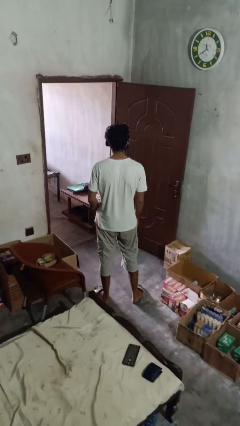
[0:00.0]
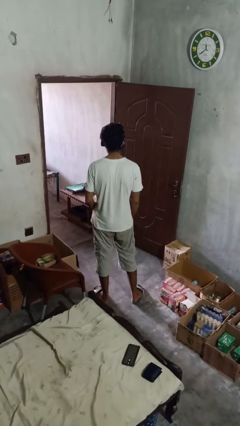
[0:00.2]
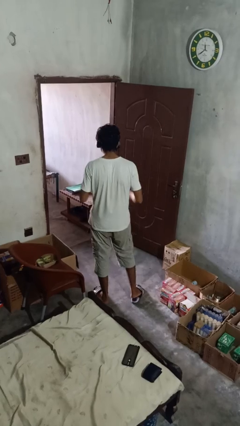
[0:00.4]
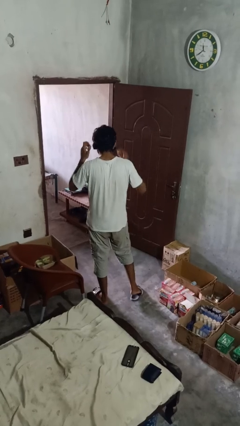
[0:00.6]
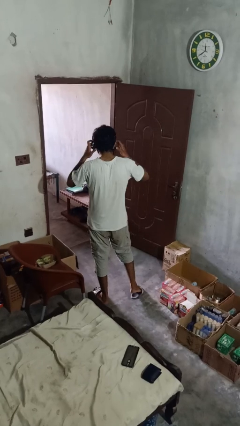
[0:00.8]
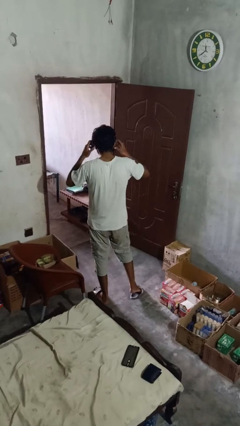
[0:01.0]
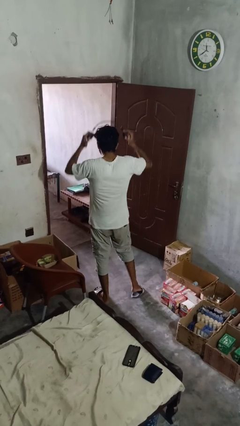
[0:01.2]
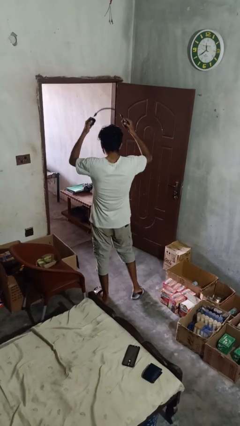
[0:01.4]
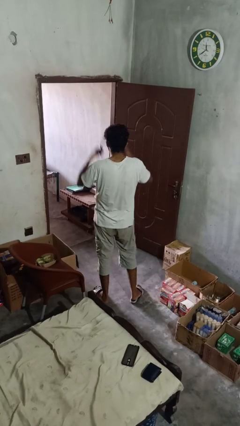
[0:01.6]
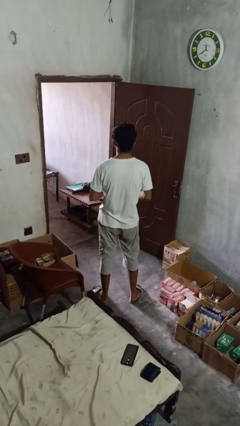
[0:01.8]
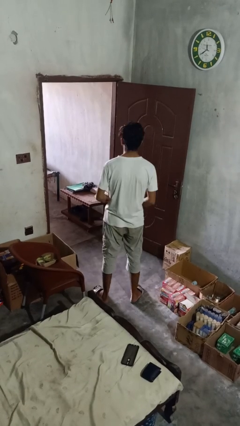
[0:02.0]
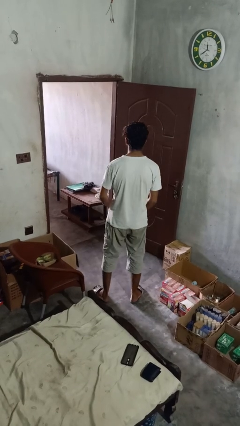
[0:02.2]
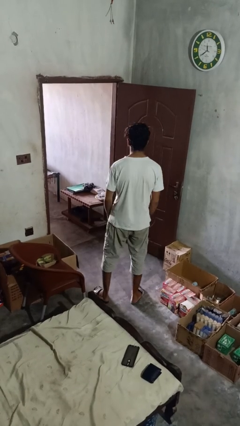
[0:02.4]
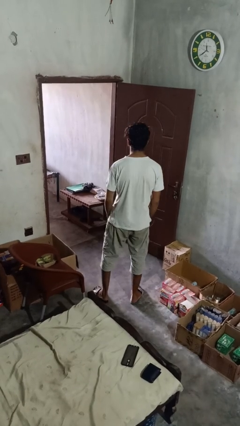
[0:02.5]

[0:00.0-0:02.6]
person takes off headphones

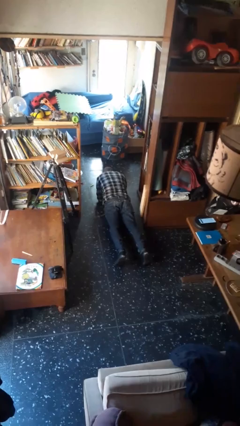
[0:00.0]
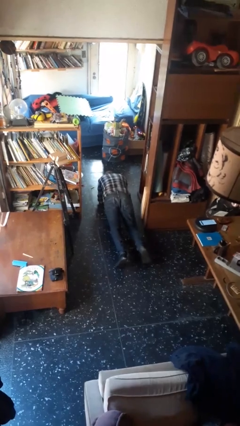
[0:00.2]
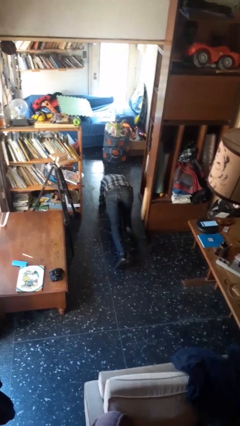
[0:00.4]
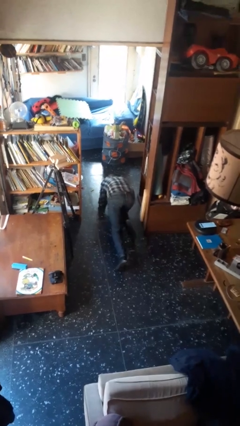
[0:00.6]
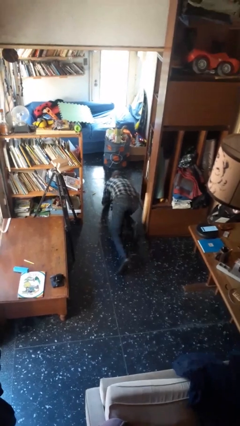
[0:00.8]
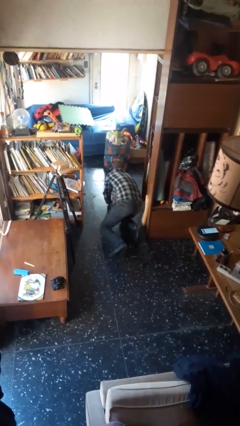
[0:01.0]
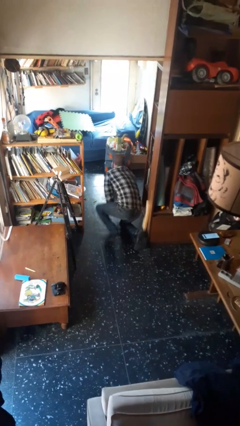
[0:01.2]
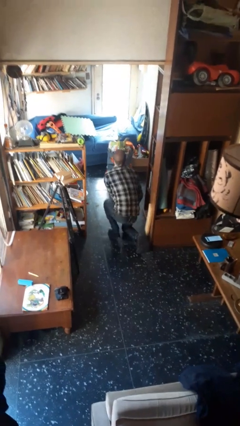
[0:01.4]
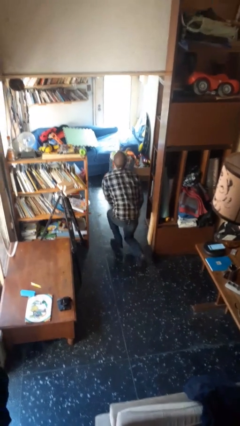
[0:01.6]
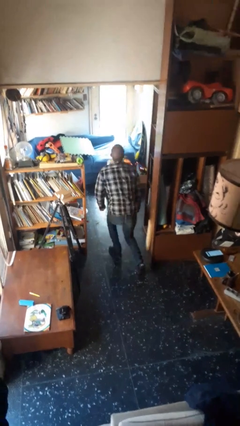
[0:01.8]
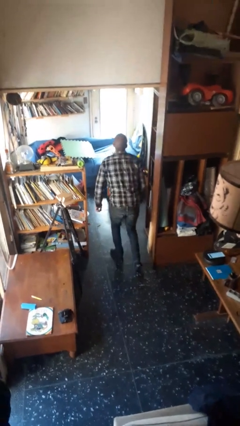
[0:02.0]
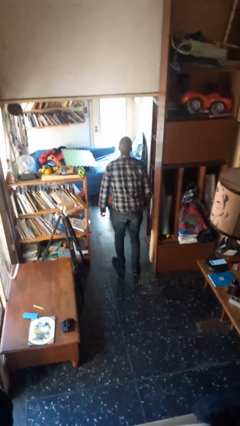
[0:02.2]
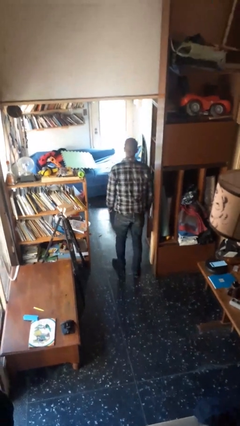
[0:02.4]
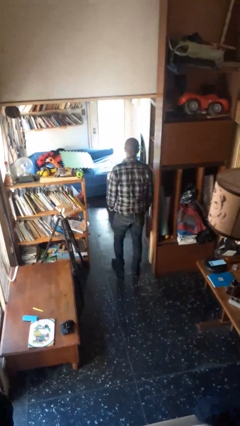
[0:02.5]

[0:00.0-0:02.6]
person stands up from floor

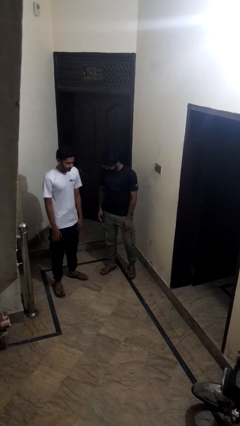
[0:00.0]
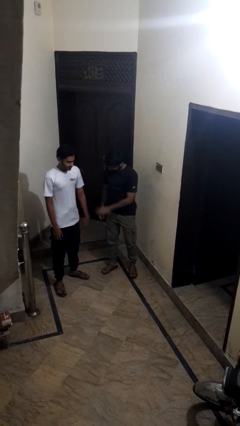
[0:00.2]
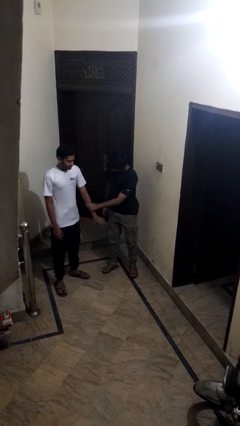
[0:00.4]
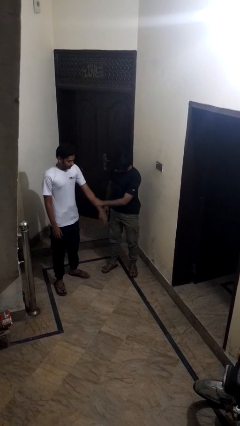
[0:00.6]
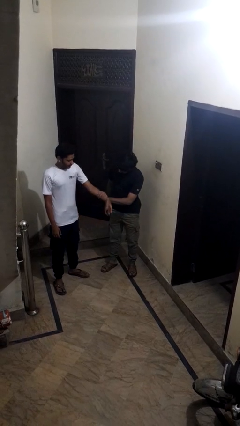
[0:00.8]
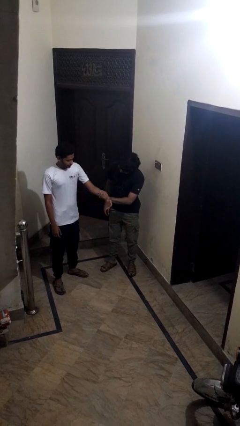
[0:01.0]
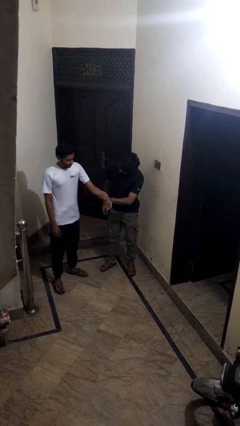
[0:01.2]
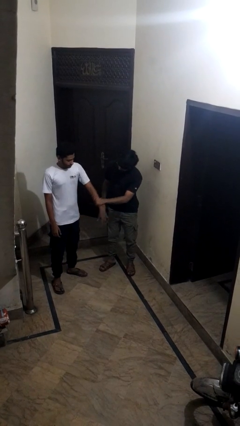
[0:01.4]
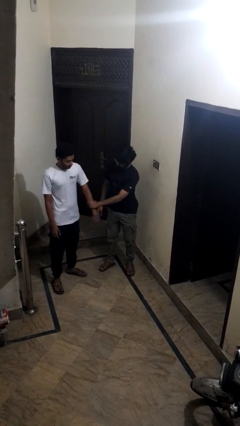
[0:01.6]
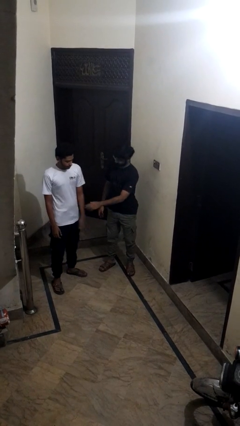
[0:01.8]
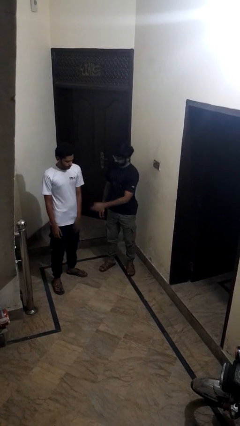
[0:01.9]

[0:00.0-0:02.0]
person grabs person by forearm

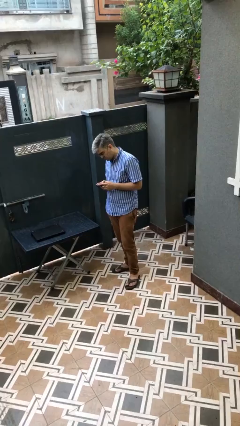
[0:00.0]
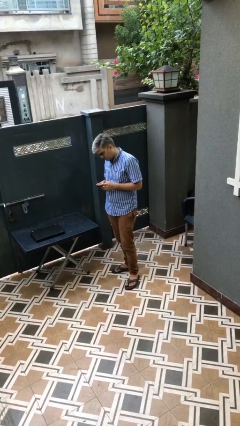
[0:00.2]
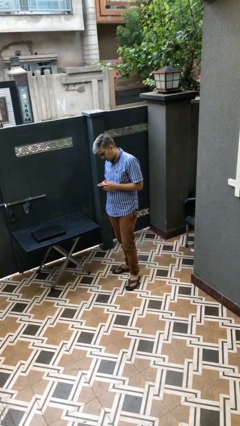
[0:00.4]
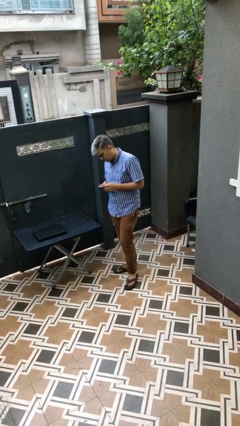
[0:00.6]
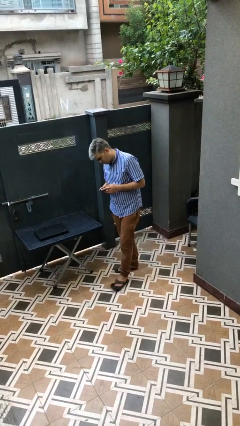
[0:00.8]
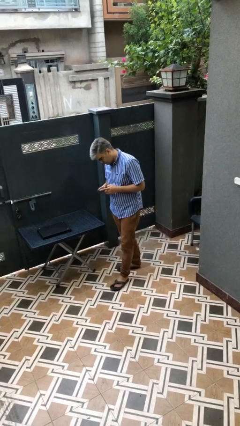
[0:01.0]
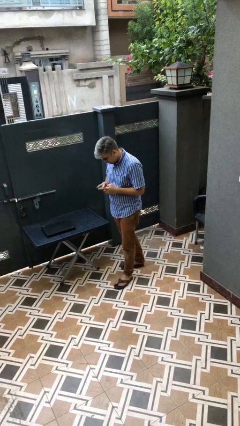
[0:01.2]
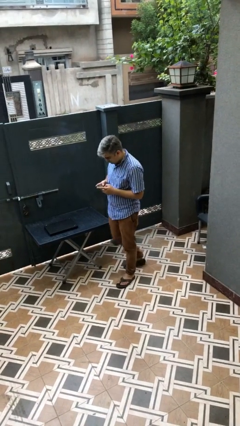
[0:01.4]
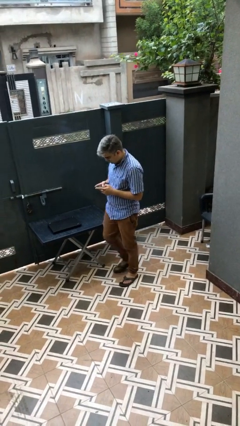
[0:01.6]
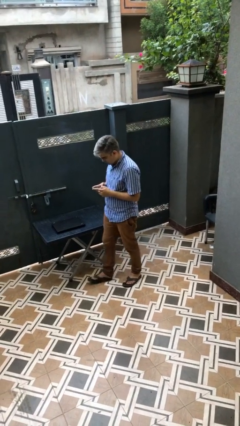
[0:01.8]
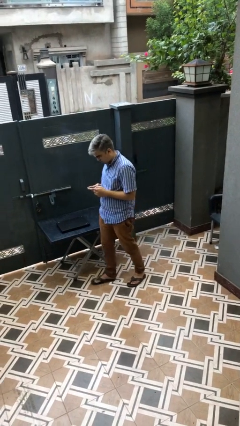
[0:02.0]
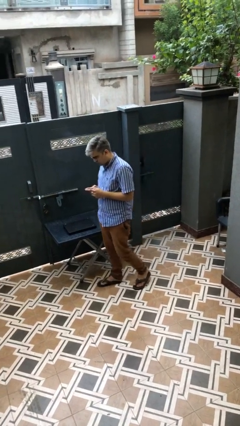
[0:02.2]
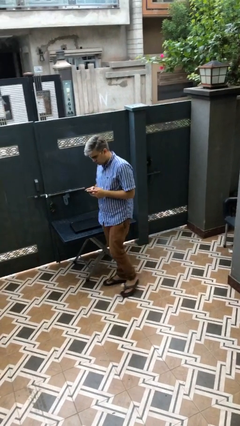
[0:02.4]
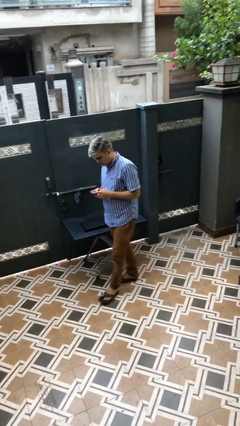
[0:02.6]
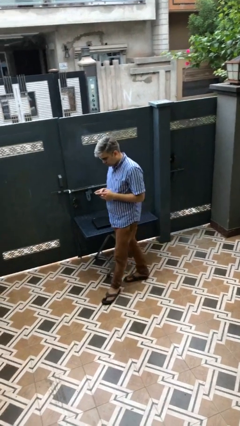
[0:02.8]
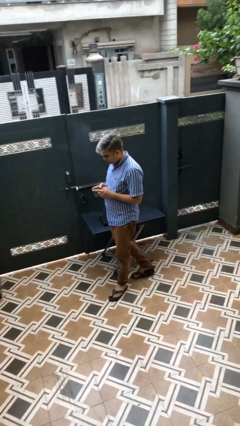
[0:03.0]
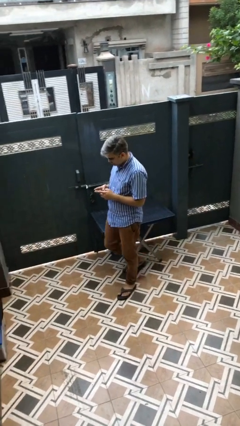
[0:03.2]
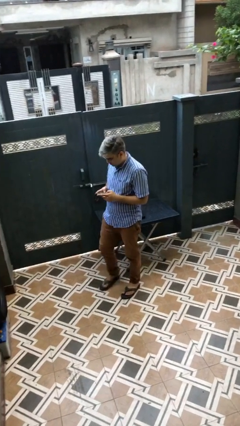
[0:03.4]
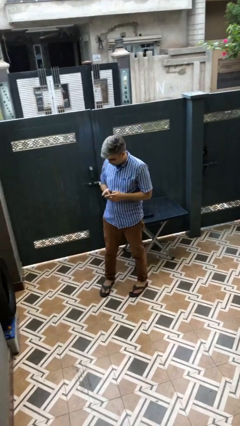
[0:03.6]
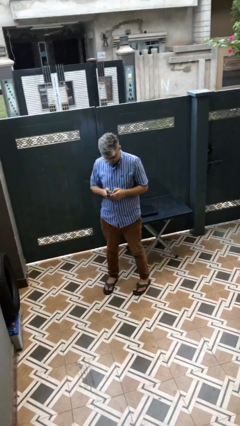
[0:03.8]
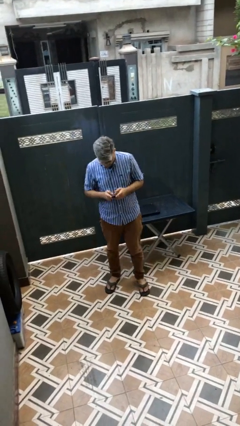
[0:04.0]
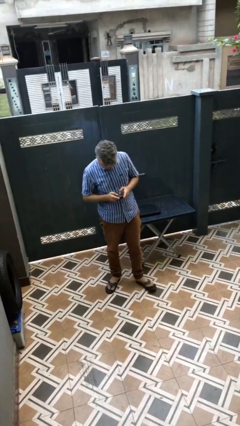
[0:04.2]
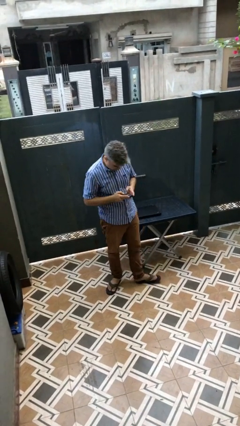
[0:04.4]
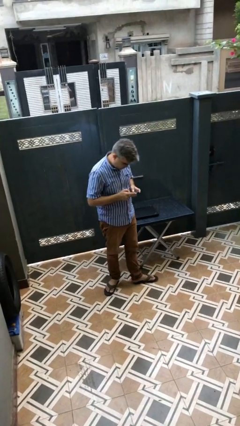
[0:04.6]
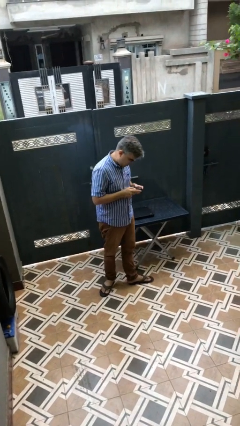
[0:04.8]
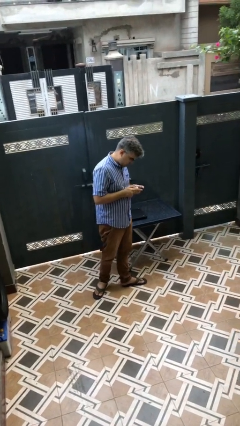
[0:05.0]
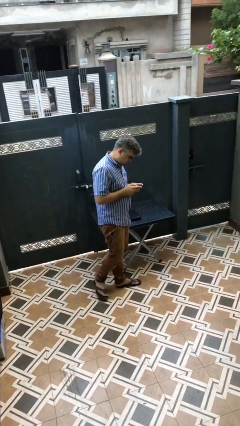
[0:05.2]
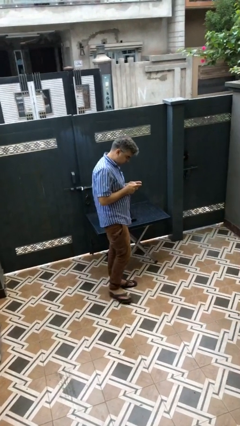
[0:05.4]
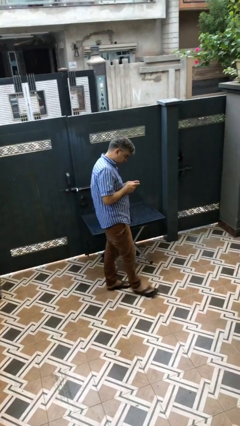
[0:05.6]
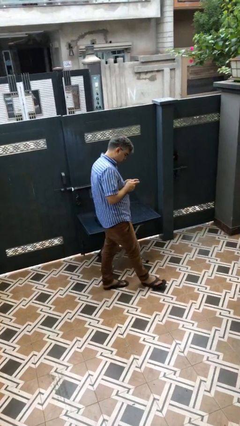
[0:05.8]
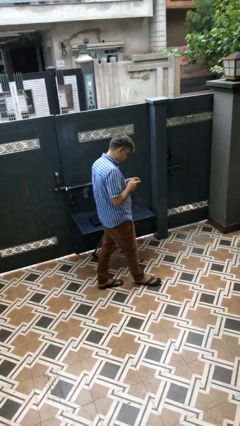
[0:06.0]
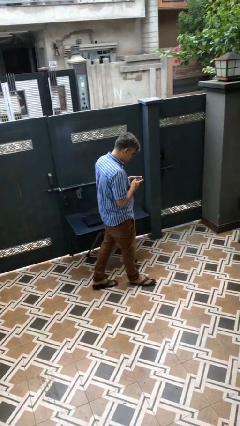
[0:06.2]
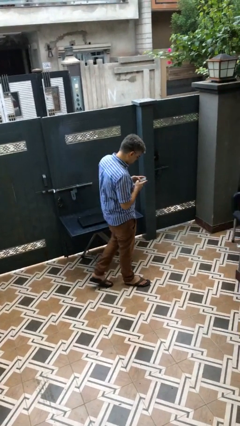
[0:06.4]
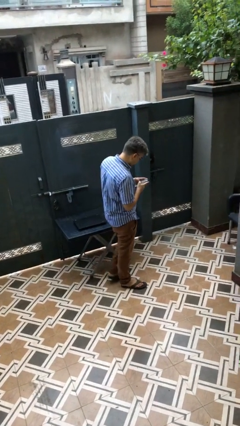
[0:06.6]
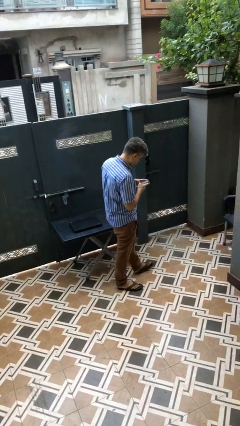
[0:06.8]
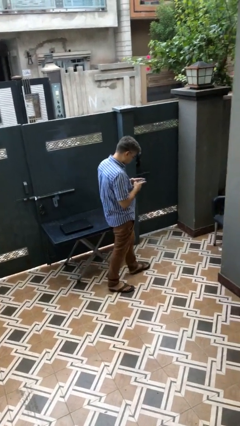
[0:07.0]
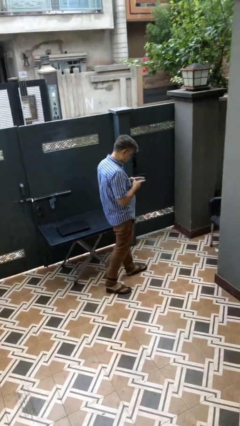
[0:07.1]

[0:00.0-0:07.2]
person texts on phone

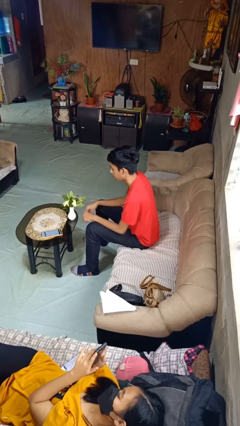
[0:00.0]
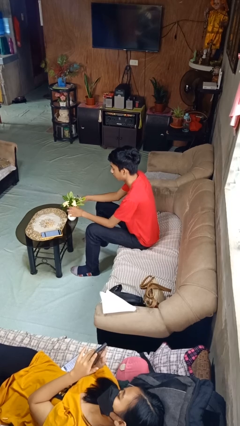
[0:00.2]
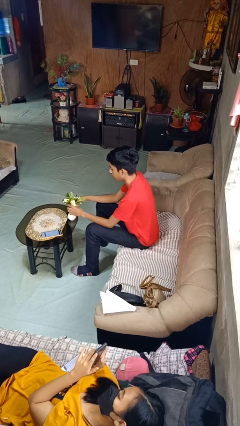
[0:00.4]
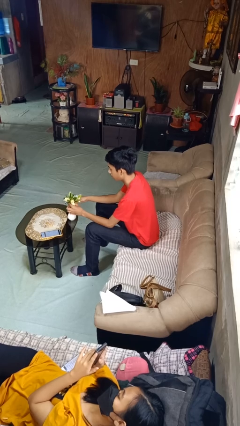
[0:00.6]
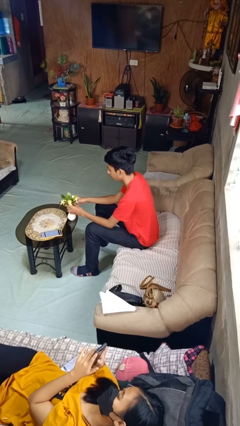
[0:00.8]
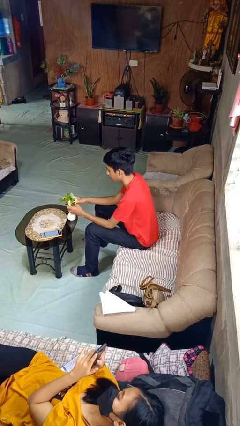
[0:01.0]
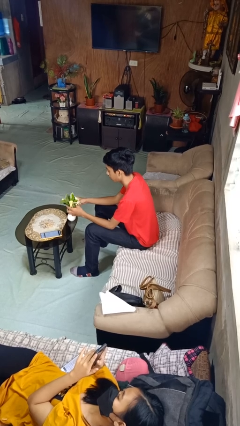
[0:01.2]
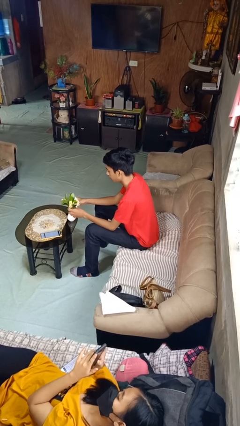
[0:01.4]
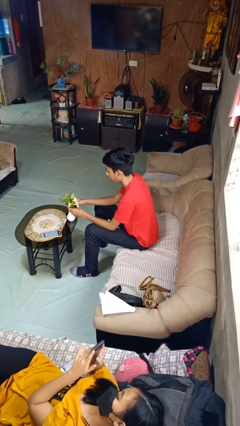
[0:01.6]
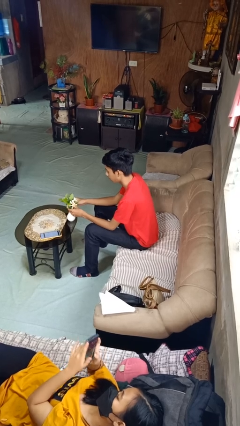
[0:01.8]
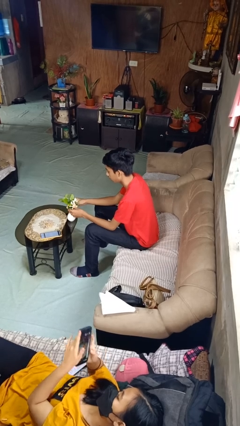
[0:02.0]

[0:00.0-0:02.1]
person arranges flowers in vase

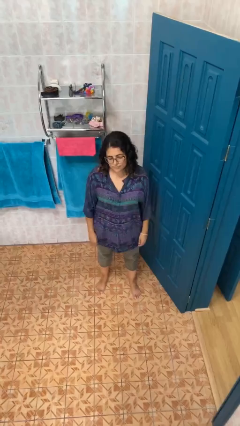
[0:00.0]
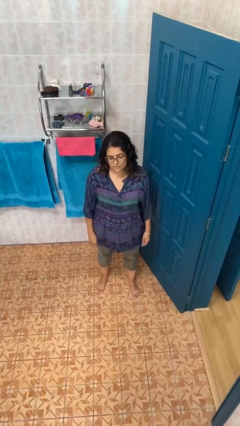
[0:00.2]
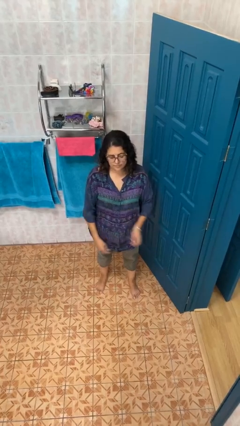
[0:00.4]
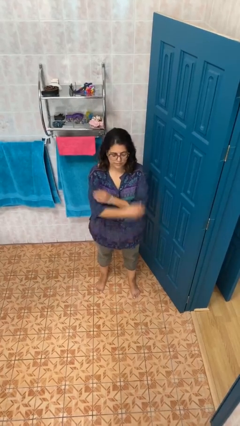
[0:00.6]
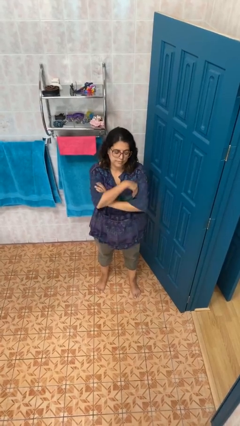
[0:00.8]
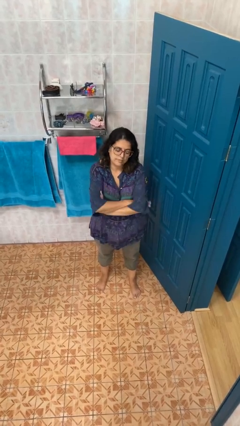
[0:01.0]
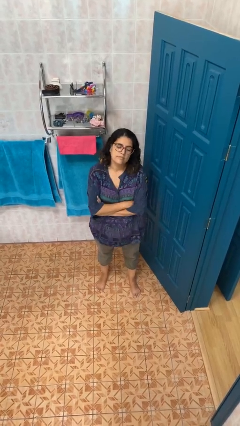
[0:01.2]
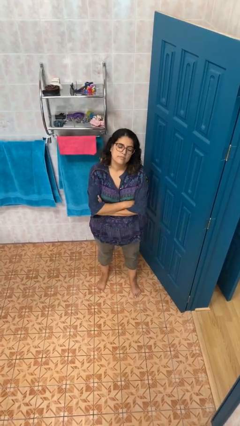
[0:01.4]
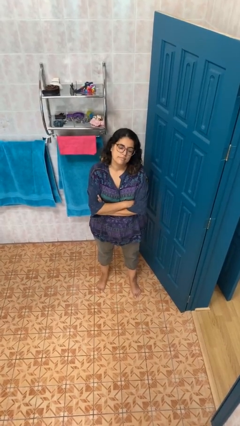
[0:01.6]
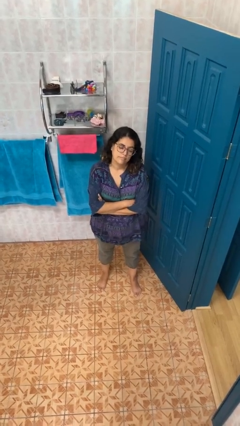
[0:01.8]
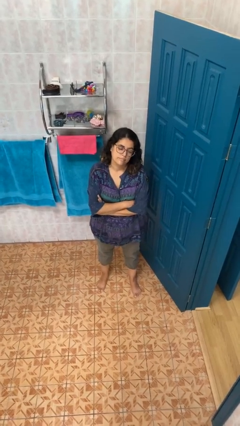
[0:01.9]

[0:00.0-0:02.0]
person crosses arms
